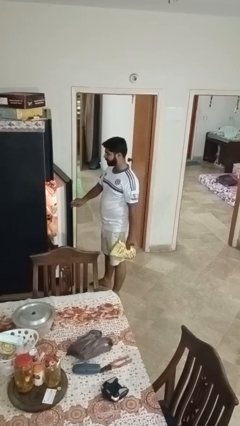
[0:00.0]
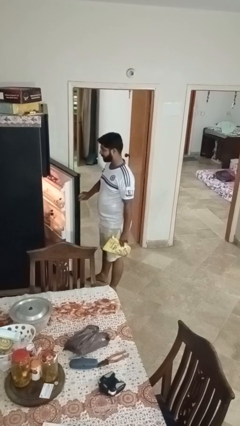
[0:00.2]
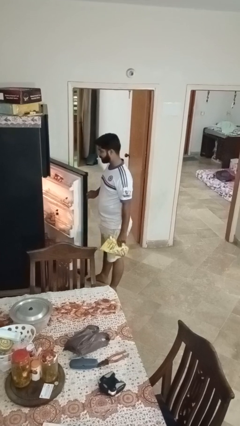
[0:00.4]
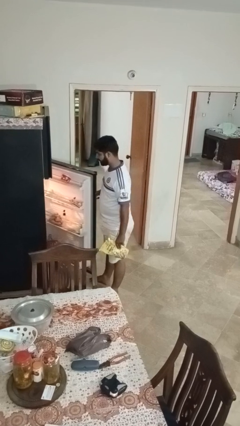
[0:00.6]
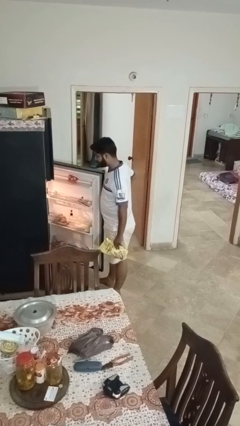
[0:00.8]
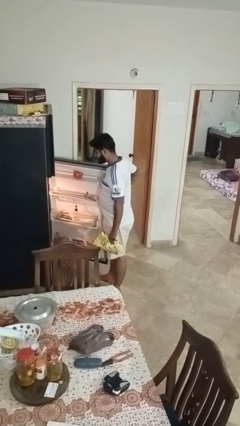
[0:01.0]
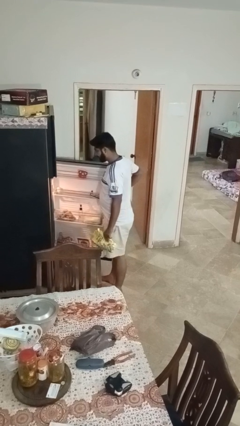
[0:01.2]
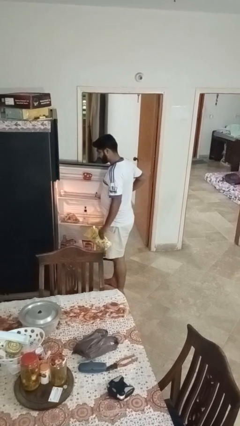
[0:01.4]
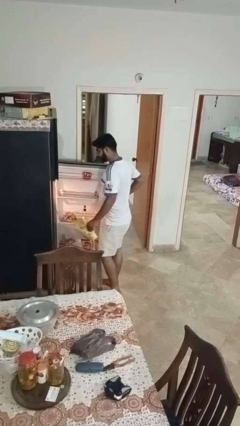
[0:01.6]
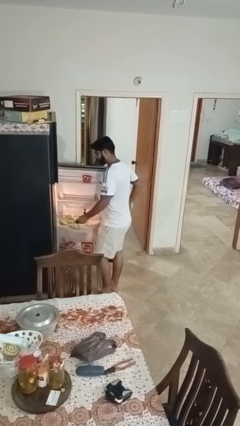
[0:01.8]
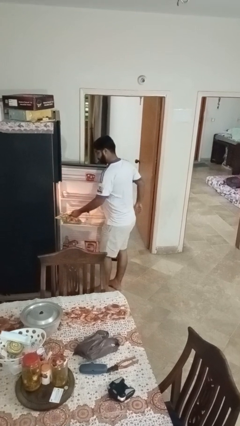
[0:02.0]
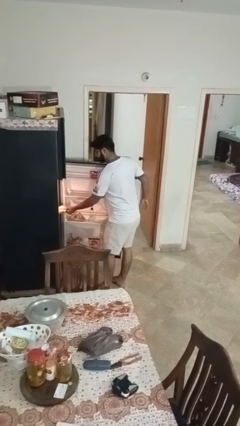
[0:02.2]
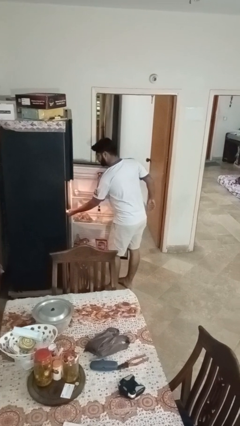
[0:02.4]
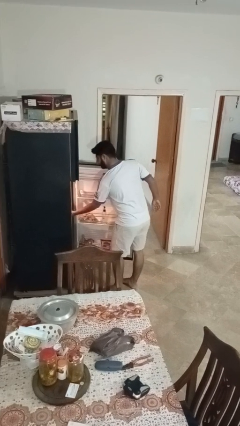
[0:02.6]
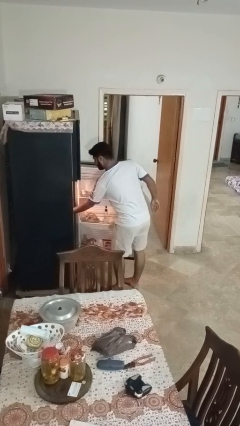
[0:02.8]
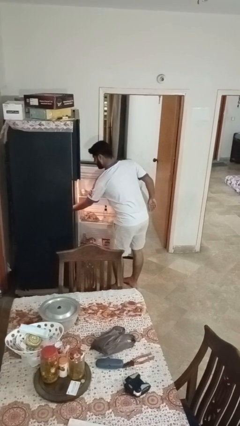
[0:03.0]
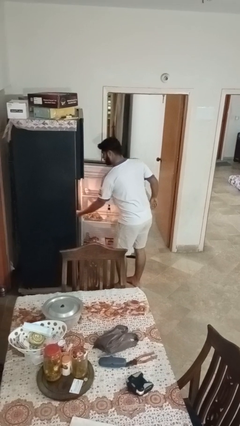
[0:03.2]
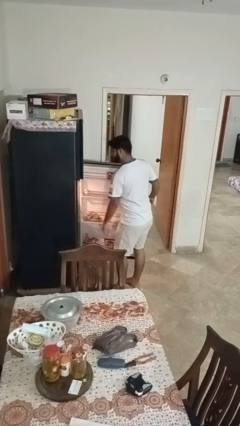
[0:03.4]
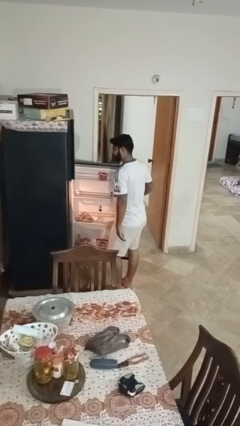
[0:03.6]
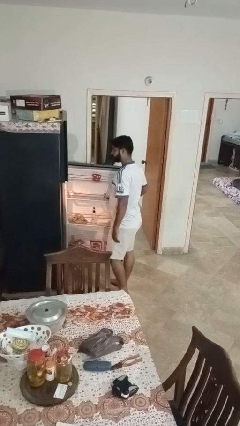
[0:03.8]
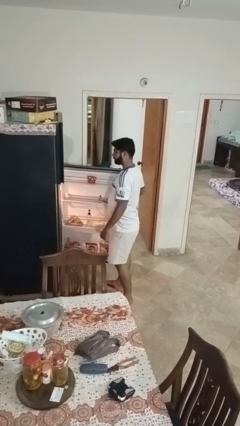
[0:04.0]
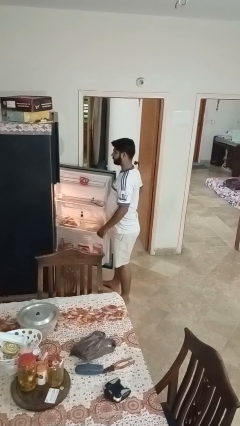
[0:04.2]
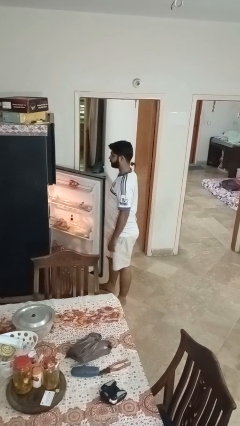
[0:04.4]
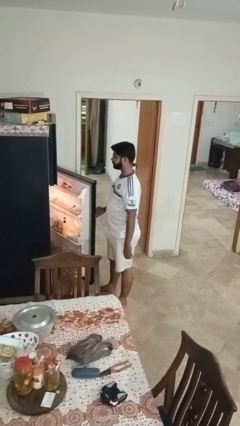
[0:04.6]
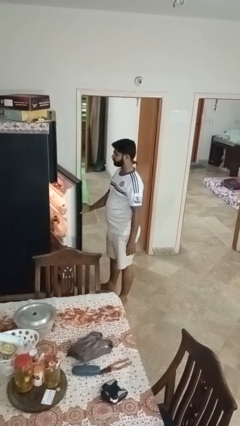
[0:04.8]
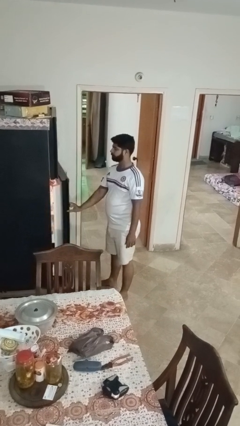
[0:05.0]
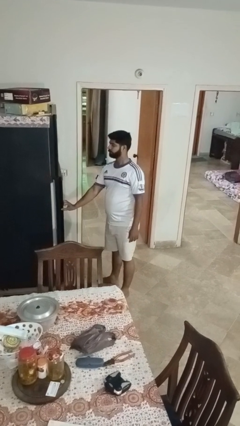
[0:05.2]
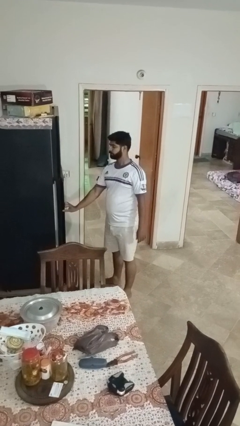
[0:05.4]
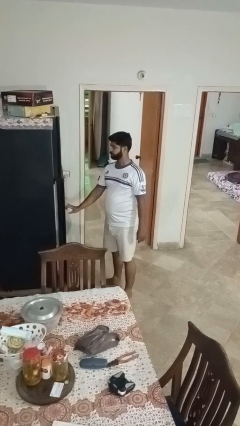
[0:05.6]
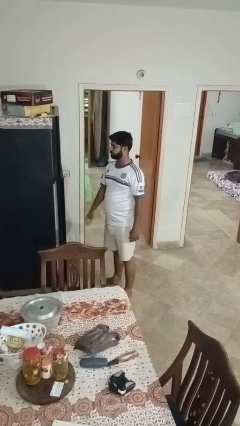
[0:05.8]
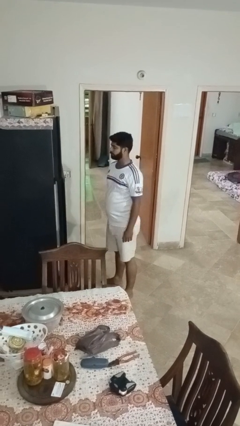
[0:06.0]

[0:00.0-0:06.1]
person puts object into refrigerator

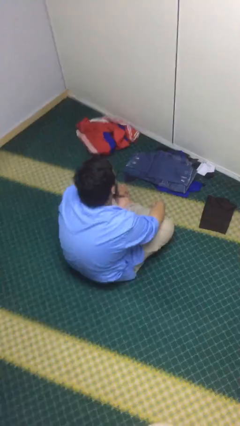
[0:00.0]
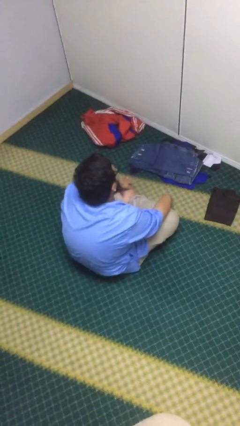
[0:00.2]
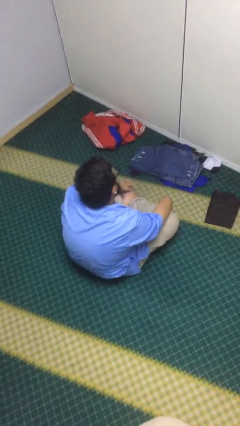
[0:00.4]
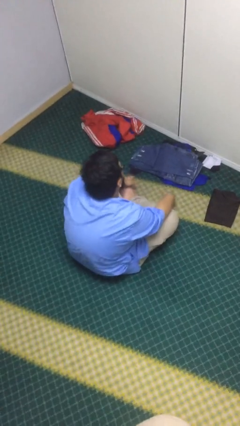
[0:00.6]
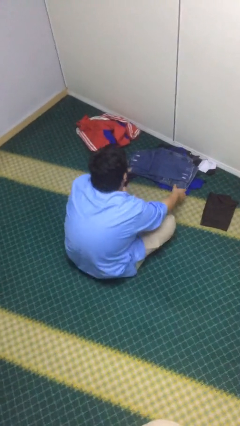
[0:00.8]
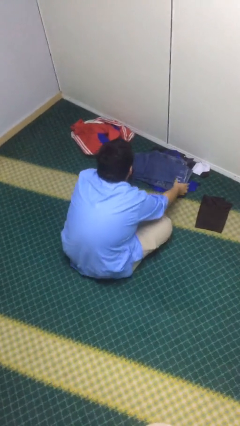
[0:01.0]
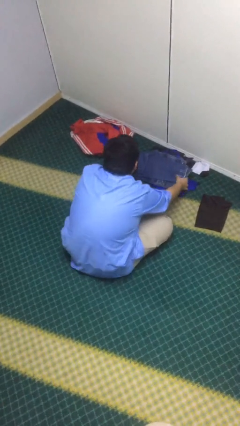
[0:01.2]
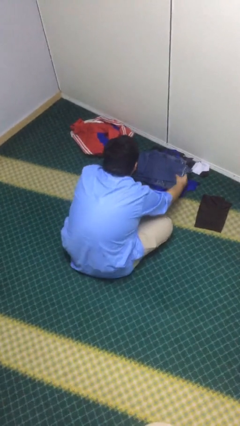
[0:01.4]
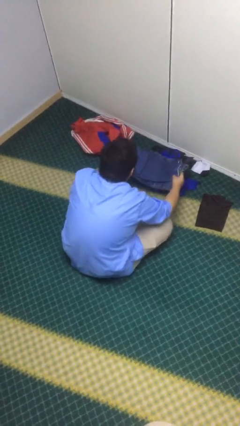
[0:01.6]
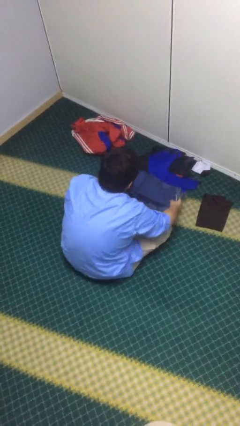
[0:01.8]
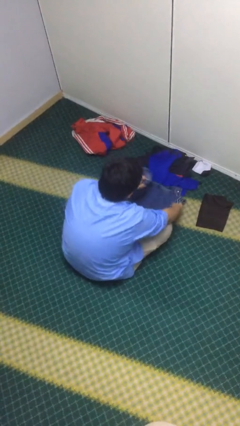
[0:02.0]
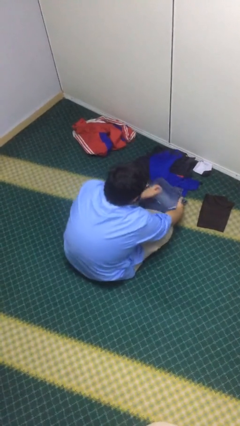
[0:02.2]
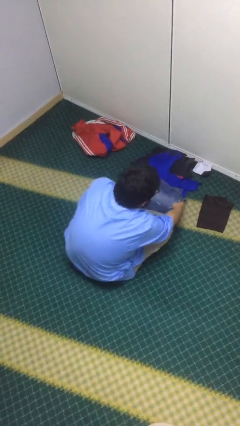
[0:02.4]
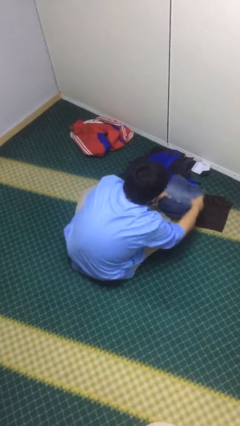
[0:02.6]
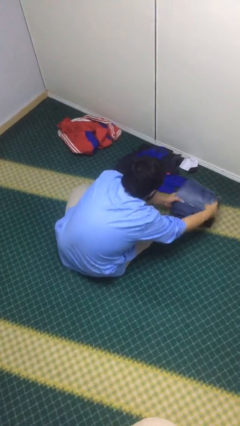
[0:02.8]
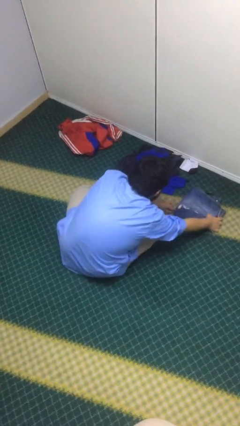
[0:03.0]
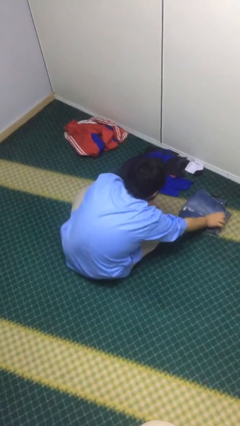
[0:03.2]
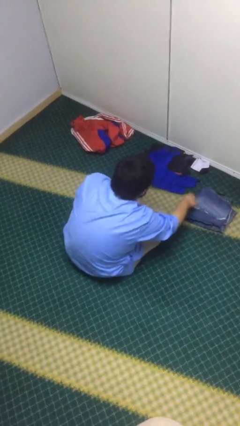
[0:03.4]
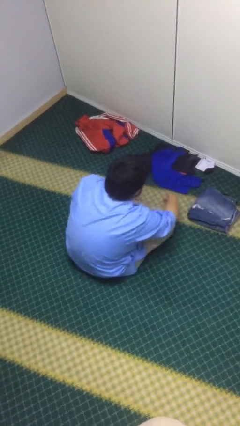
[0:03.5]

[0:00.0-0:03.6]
person folds pants

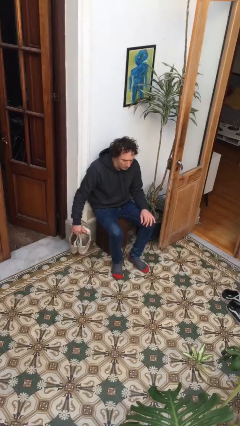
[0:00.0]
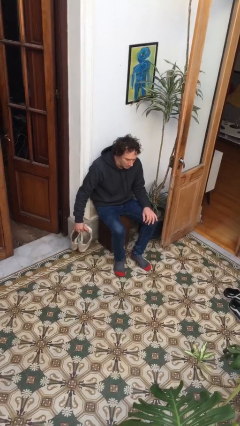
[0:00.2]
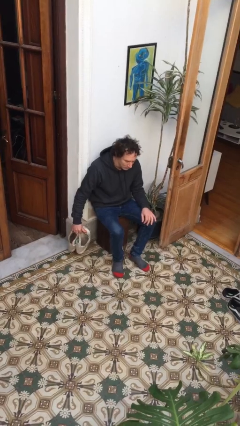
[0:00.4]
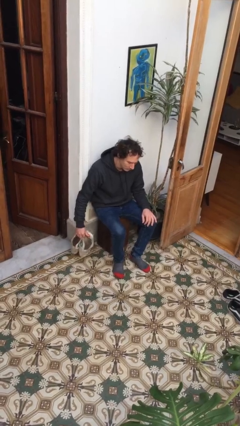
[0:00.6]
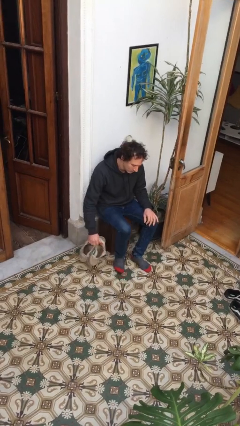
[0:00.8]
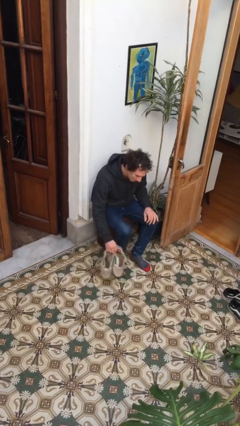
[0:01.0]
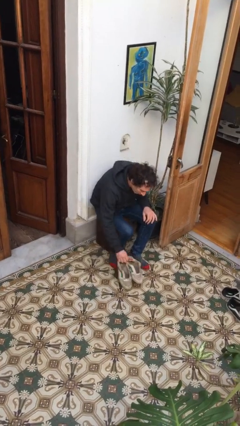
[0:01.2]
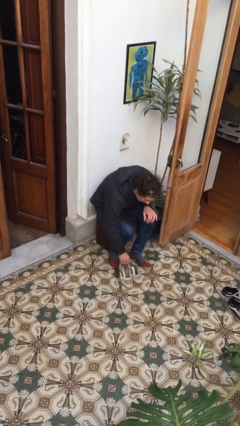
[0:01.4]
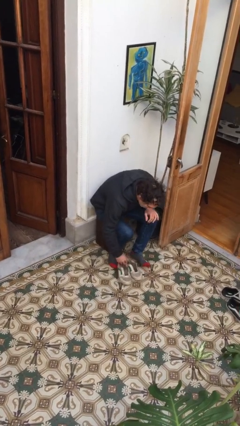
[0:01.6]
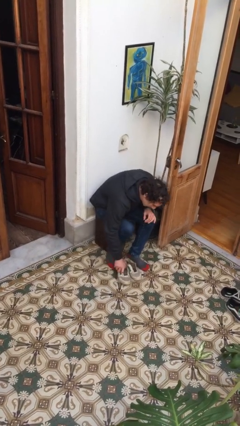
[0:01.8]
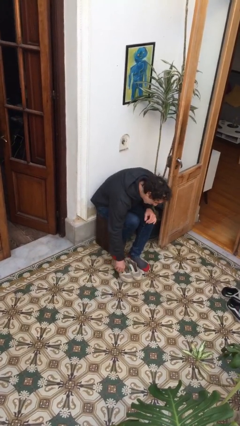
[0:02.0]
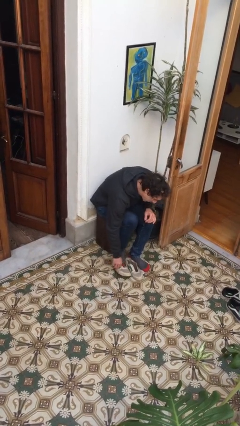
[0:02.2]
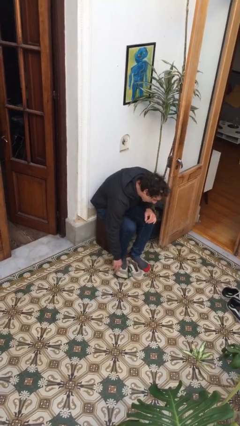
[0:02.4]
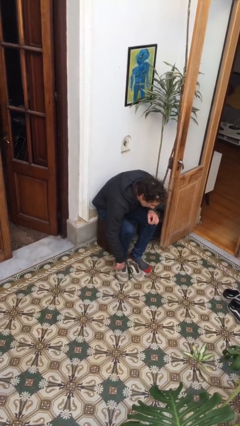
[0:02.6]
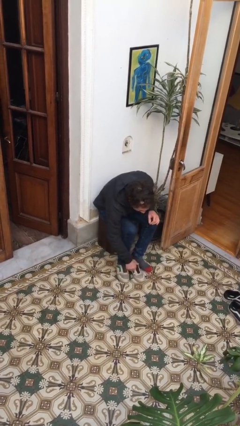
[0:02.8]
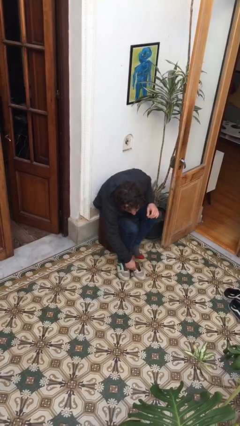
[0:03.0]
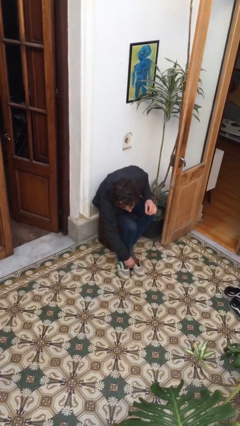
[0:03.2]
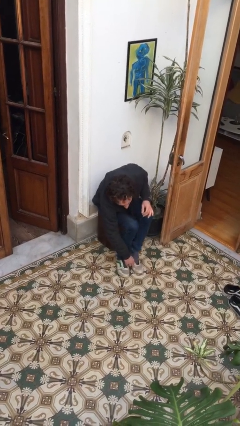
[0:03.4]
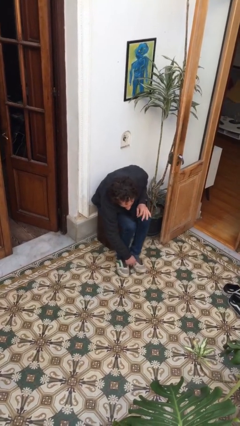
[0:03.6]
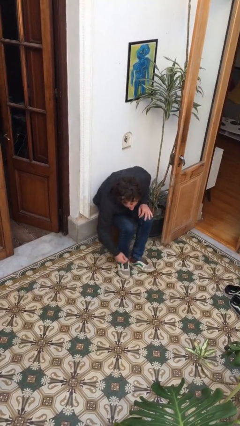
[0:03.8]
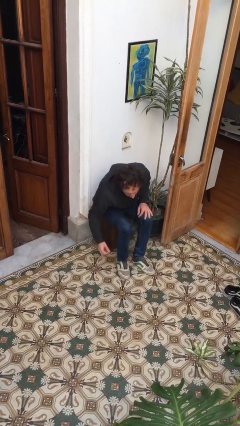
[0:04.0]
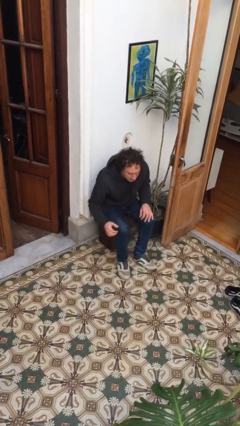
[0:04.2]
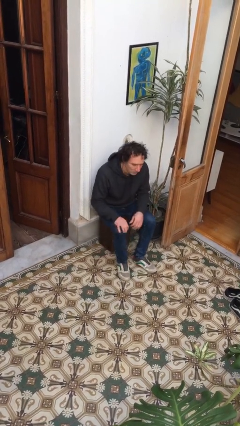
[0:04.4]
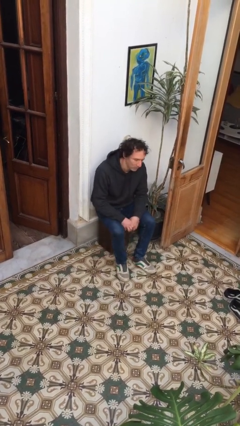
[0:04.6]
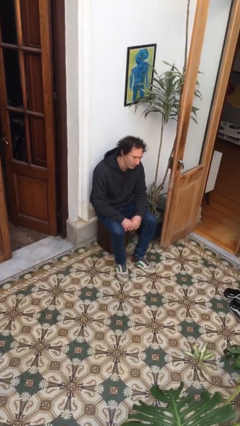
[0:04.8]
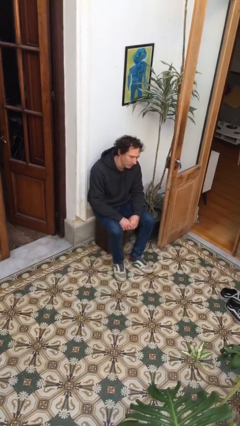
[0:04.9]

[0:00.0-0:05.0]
person puts on shoes

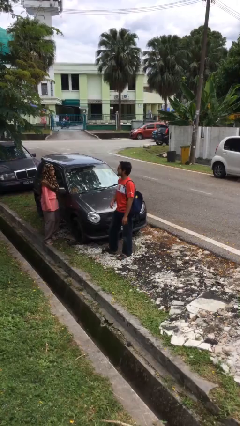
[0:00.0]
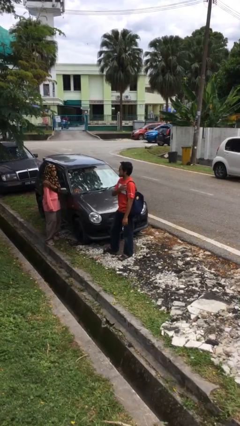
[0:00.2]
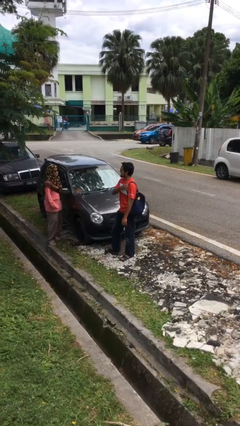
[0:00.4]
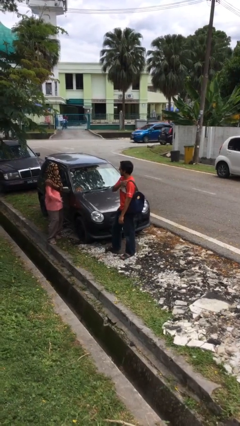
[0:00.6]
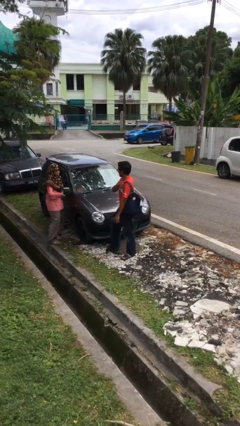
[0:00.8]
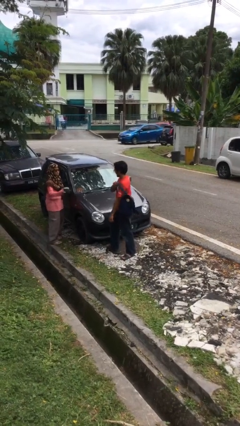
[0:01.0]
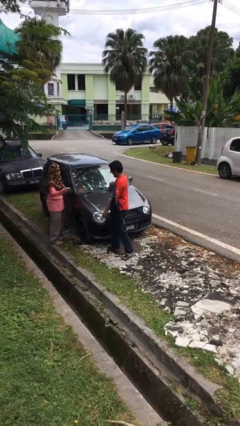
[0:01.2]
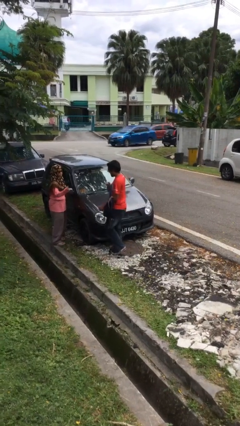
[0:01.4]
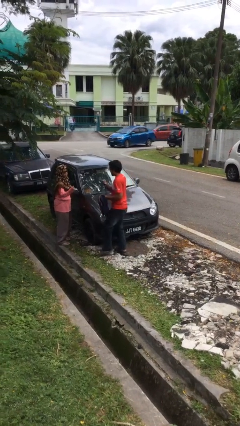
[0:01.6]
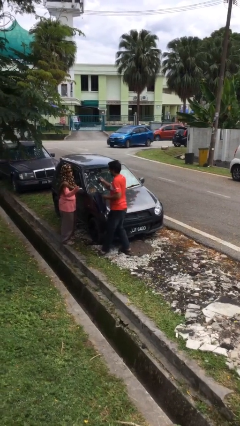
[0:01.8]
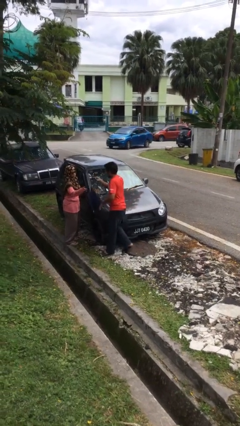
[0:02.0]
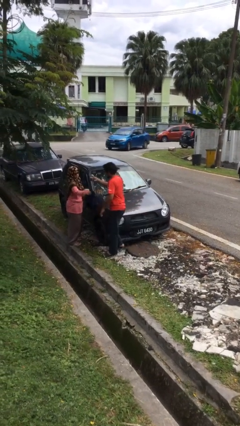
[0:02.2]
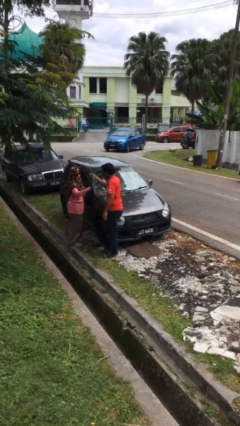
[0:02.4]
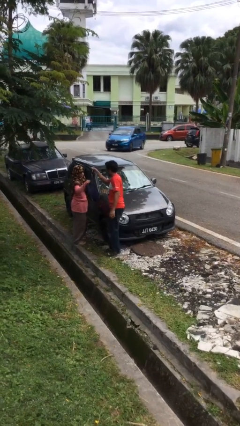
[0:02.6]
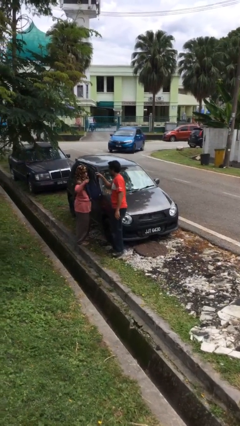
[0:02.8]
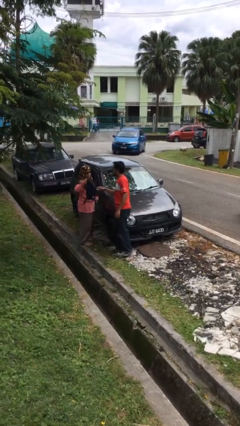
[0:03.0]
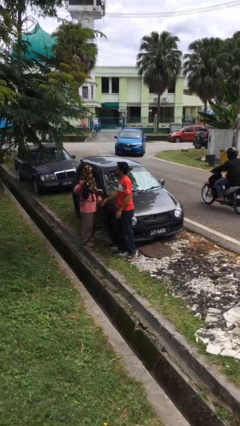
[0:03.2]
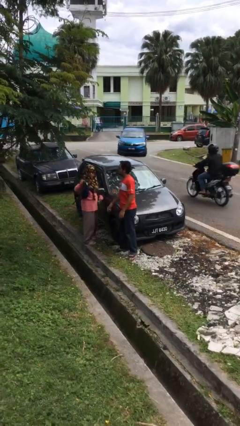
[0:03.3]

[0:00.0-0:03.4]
person transfers object to person
